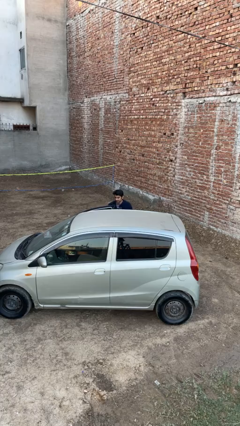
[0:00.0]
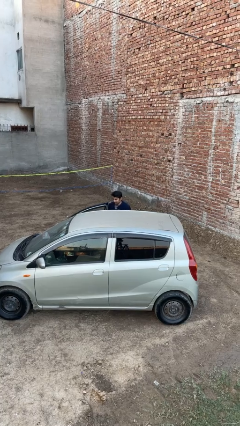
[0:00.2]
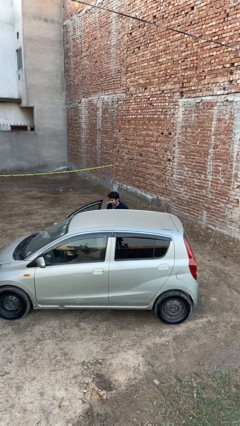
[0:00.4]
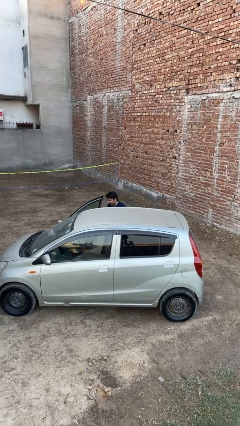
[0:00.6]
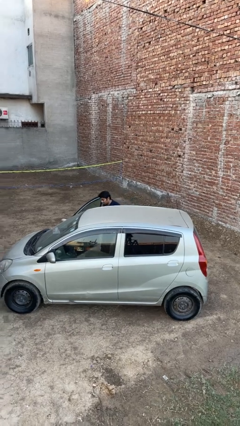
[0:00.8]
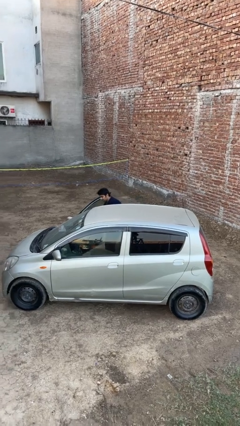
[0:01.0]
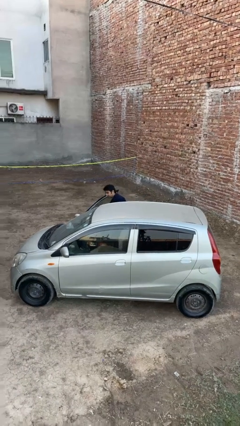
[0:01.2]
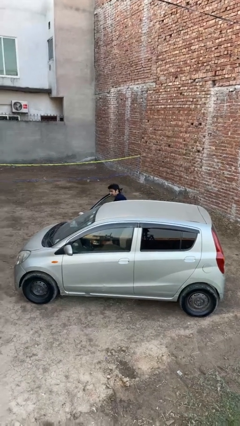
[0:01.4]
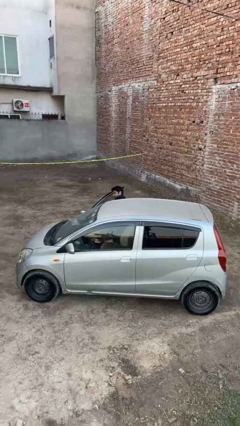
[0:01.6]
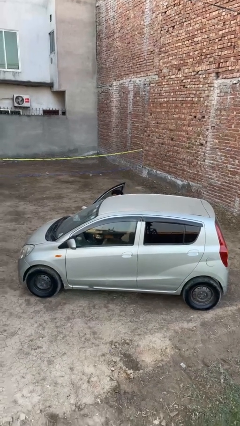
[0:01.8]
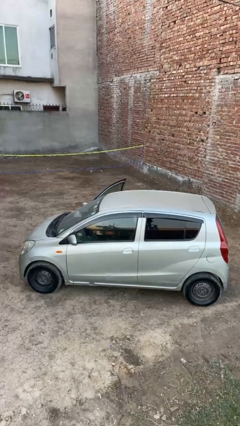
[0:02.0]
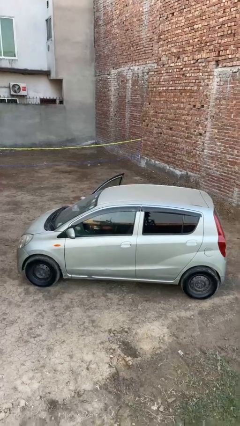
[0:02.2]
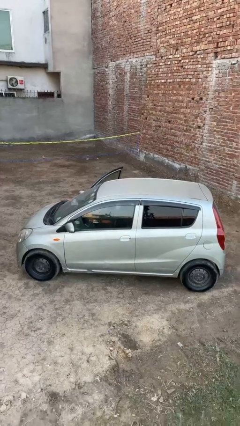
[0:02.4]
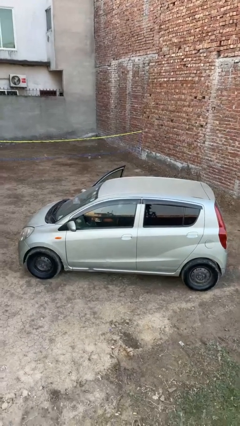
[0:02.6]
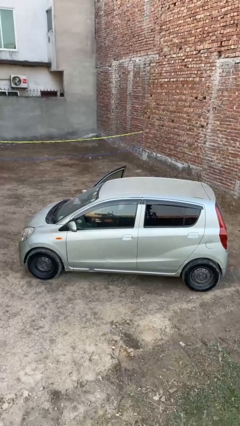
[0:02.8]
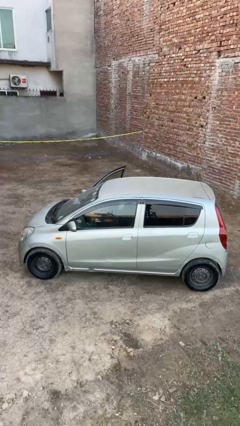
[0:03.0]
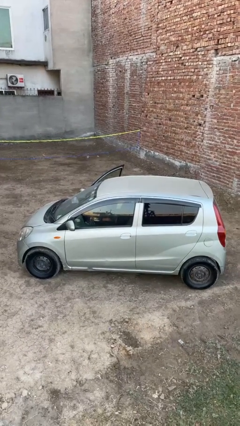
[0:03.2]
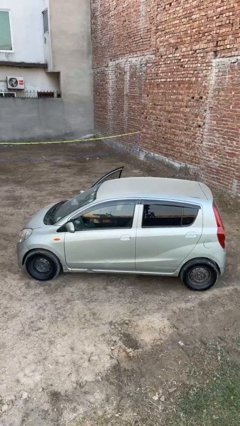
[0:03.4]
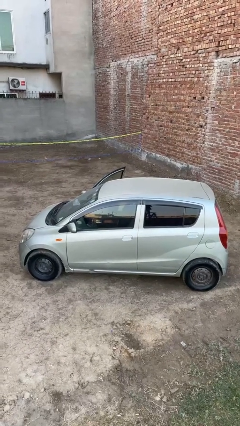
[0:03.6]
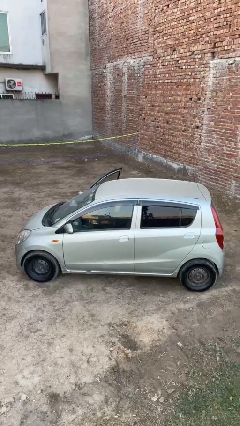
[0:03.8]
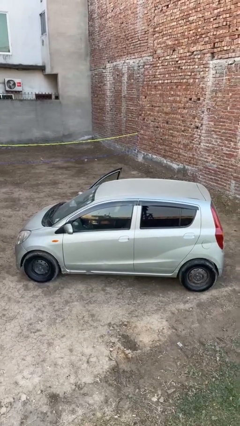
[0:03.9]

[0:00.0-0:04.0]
person enters car

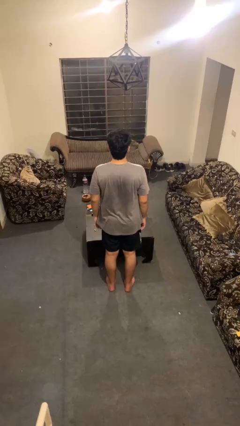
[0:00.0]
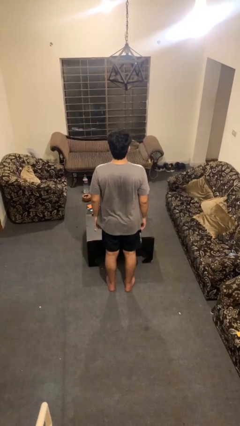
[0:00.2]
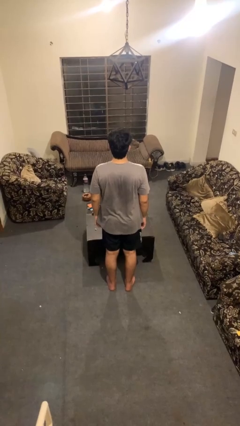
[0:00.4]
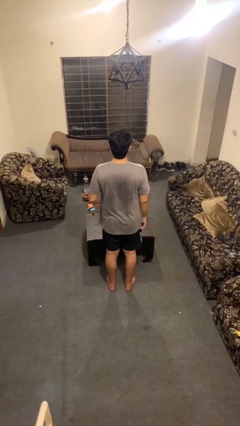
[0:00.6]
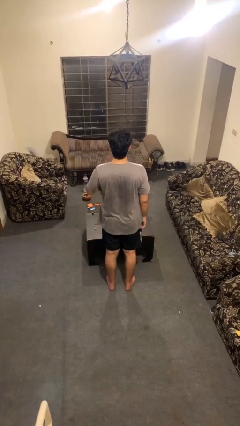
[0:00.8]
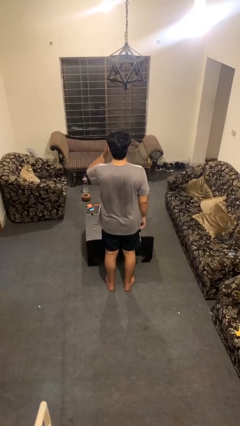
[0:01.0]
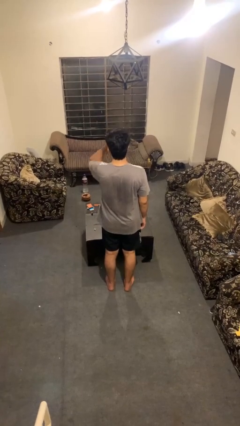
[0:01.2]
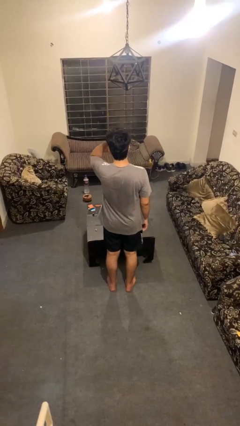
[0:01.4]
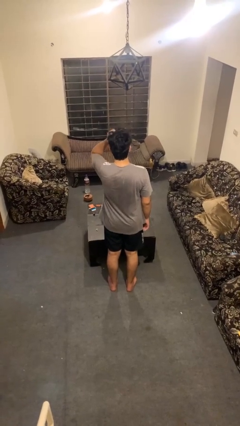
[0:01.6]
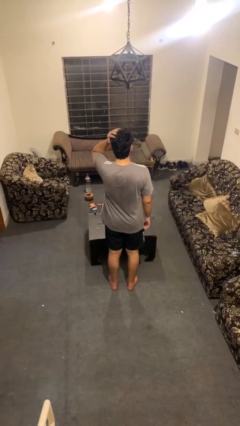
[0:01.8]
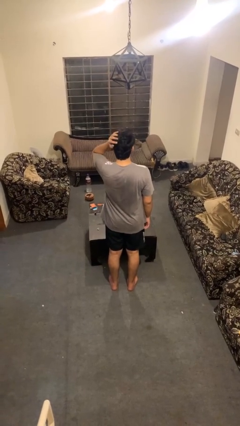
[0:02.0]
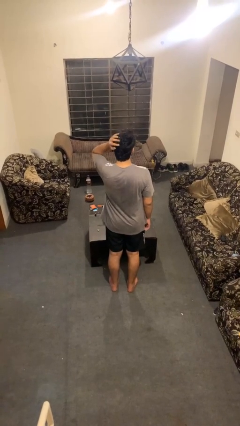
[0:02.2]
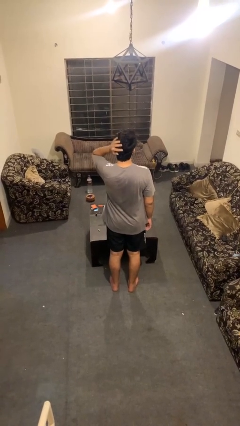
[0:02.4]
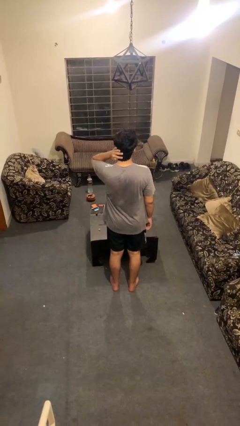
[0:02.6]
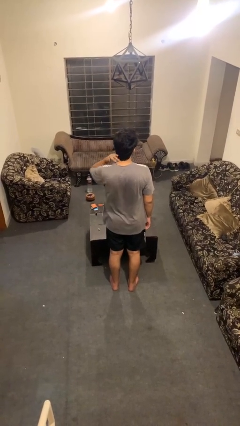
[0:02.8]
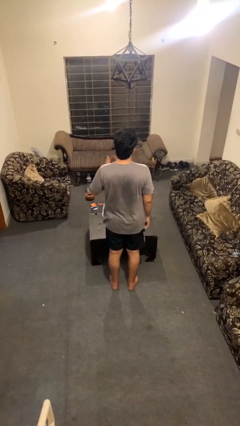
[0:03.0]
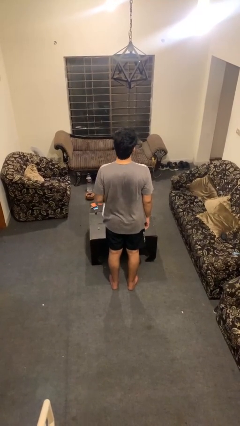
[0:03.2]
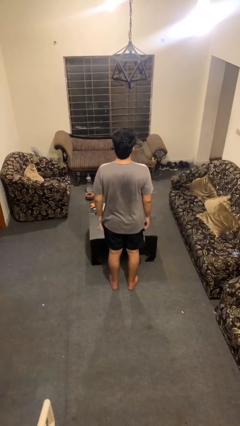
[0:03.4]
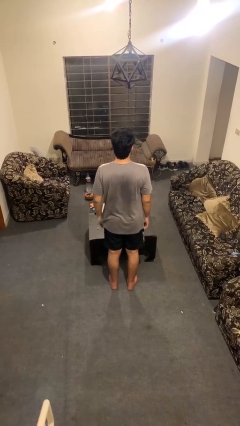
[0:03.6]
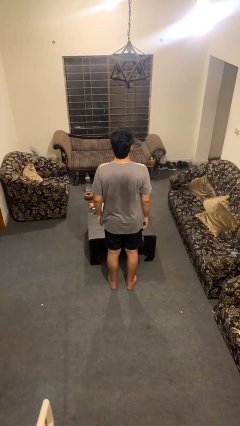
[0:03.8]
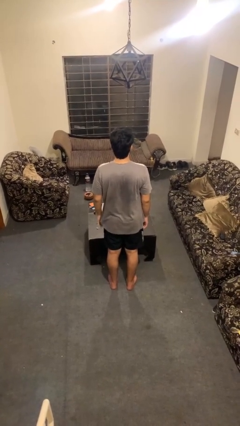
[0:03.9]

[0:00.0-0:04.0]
person strokes hair

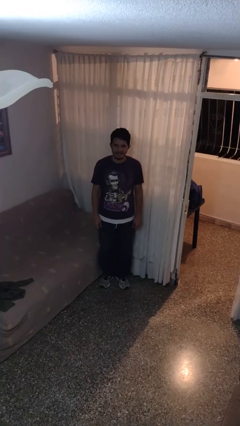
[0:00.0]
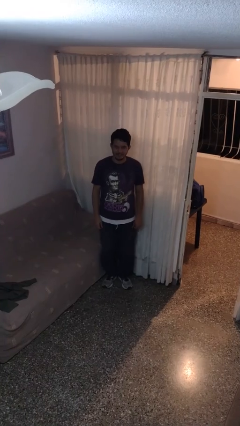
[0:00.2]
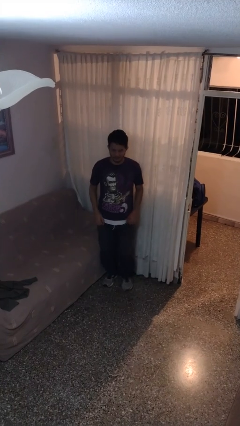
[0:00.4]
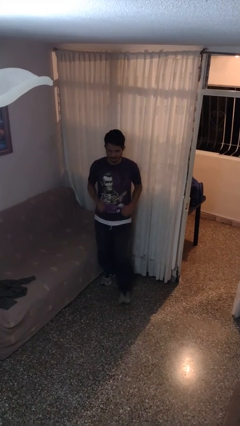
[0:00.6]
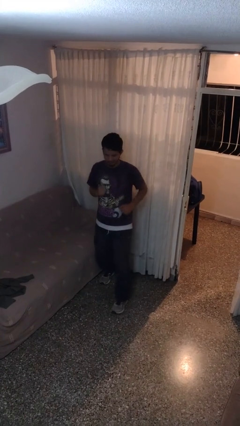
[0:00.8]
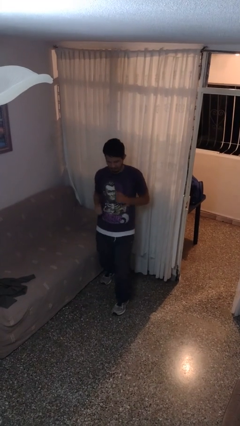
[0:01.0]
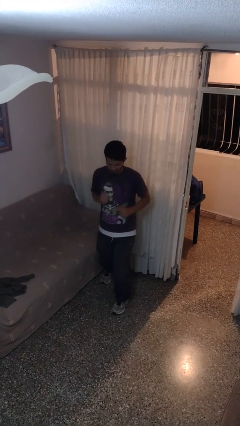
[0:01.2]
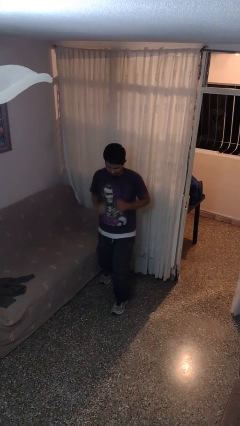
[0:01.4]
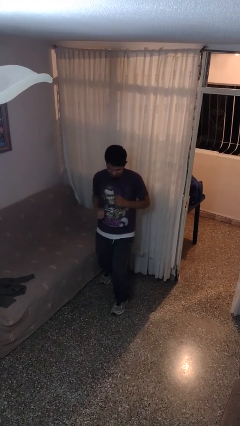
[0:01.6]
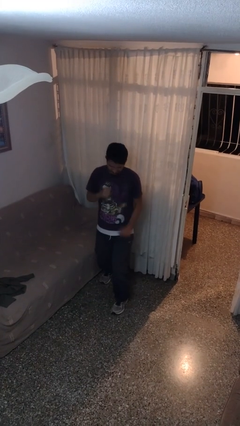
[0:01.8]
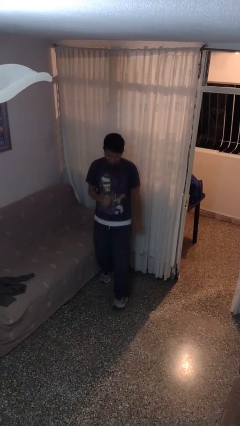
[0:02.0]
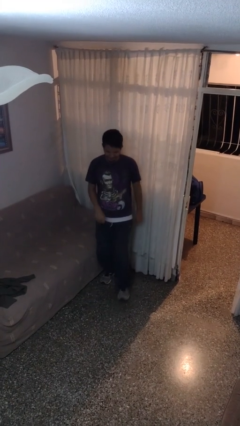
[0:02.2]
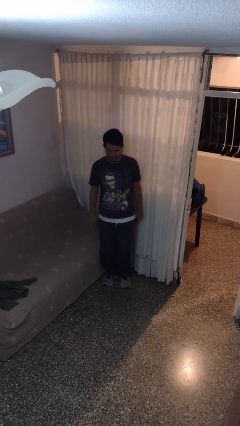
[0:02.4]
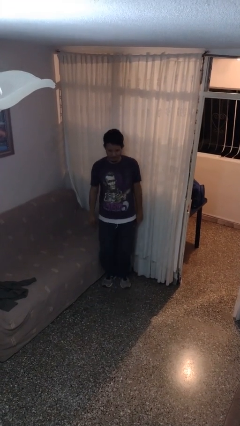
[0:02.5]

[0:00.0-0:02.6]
person dances in place

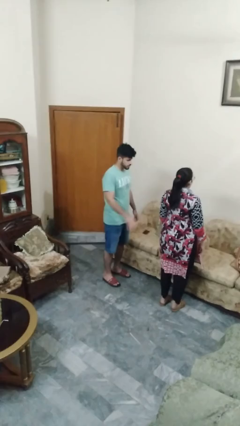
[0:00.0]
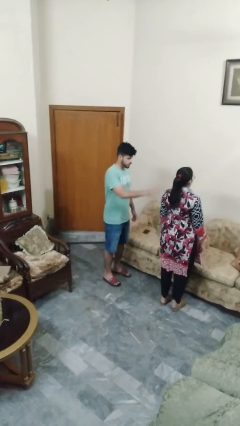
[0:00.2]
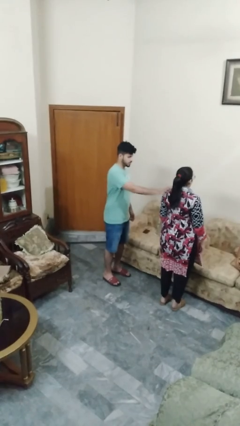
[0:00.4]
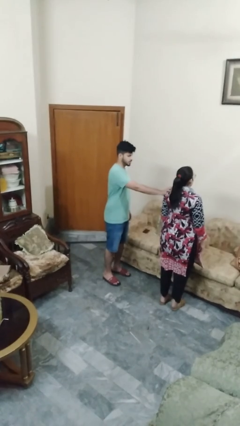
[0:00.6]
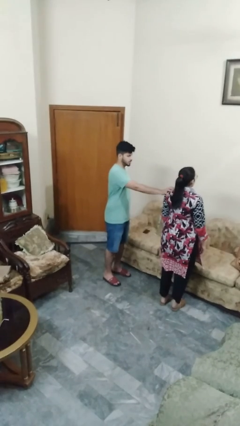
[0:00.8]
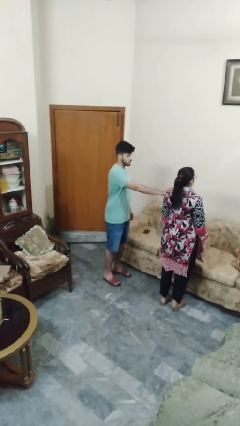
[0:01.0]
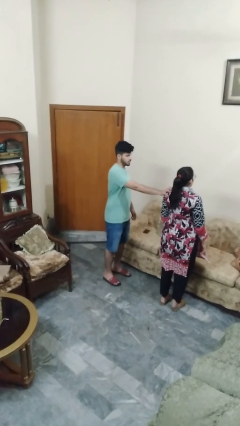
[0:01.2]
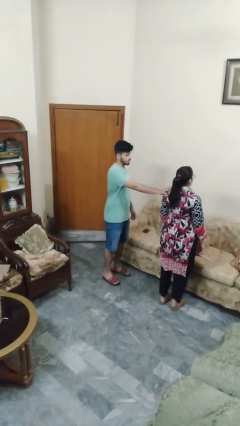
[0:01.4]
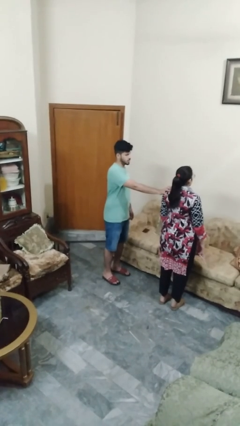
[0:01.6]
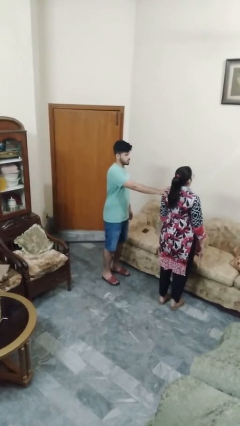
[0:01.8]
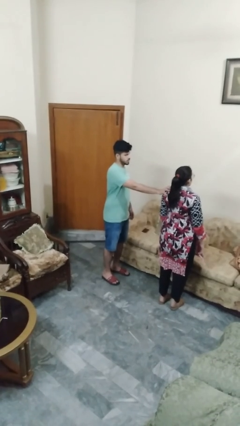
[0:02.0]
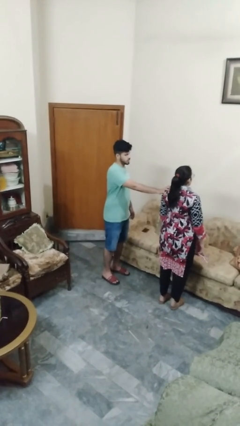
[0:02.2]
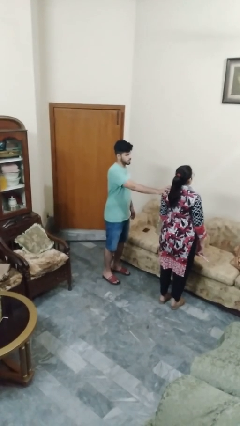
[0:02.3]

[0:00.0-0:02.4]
person grabs person by shoulder

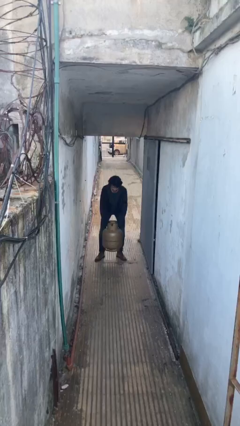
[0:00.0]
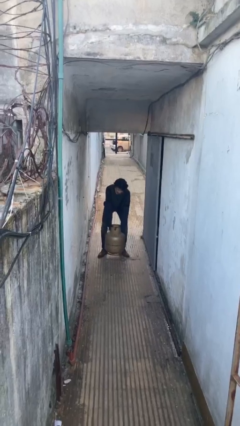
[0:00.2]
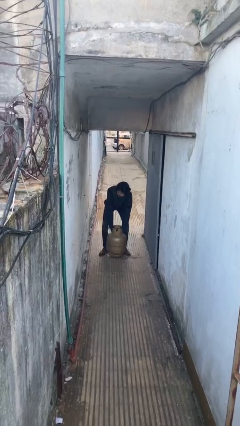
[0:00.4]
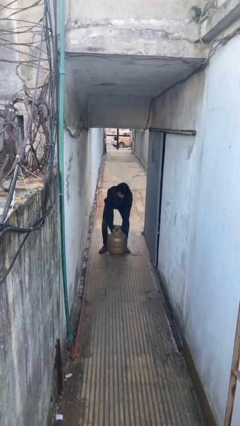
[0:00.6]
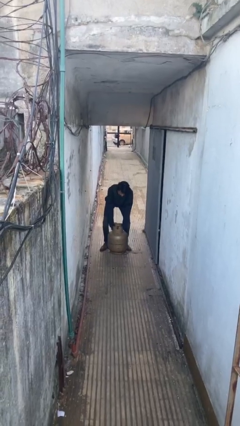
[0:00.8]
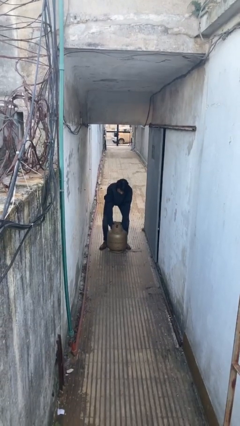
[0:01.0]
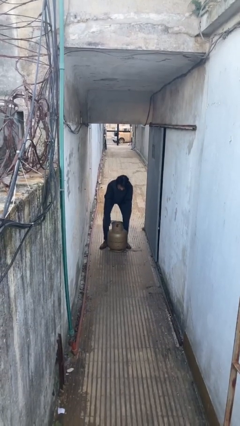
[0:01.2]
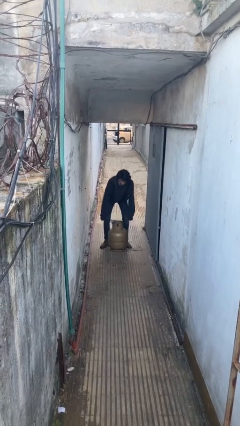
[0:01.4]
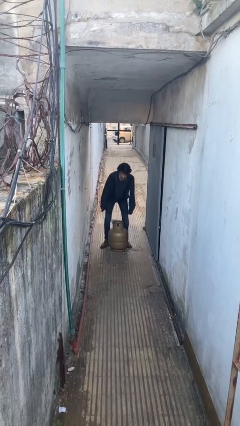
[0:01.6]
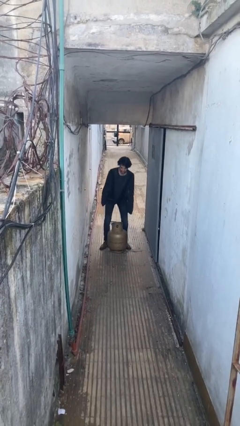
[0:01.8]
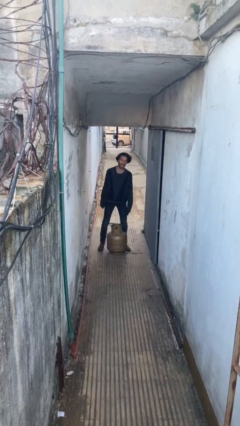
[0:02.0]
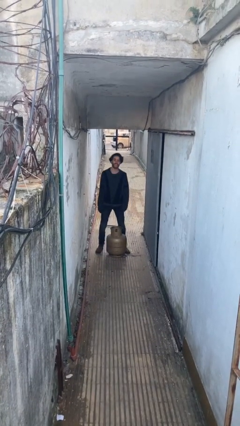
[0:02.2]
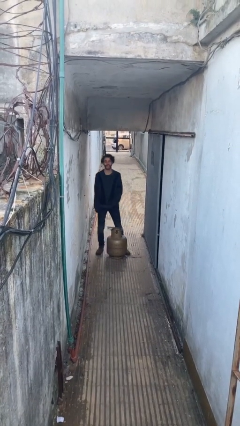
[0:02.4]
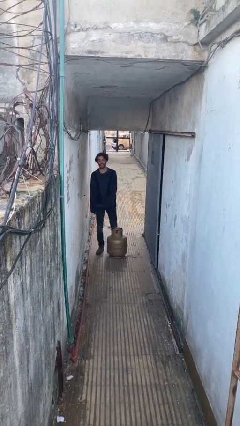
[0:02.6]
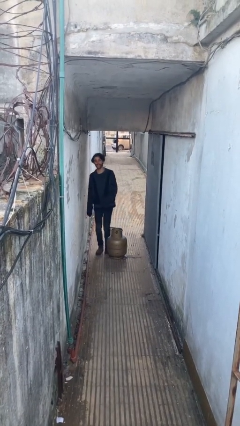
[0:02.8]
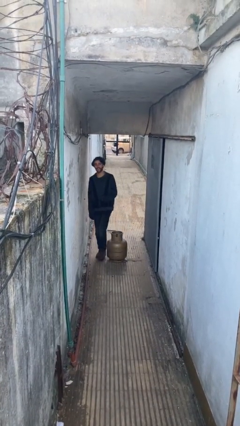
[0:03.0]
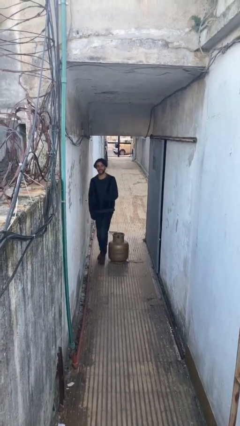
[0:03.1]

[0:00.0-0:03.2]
person puts down object on floor

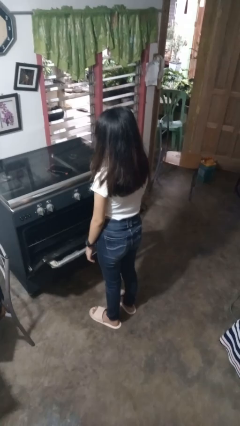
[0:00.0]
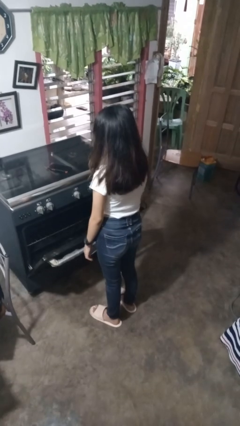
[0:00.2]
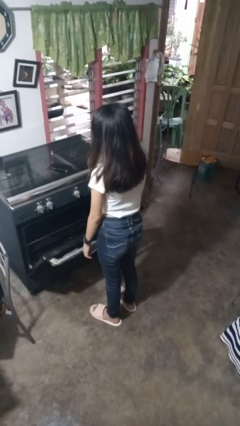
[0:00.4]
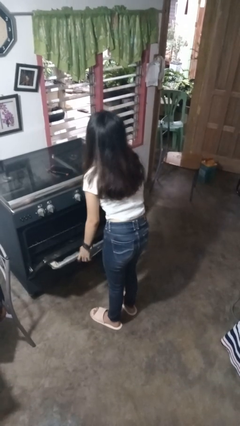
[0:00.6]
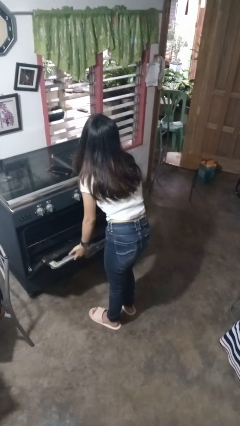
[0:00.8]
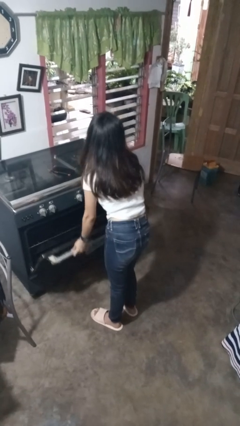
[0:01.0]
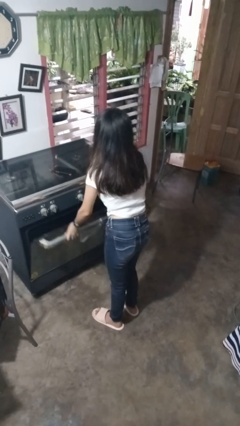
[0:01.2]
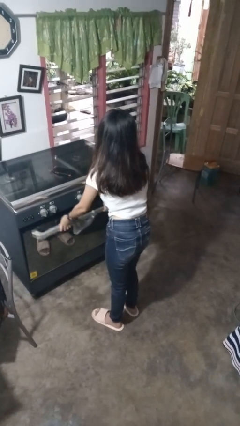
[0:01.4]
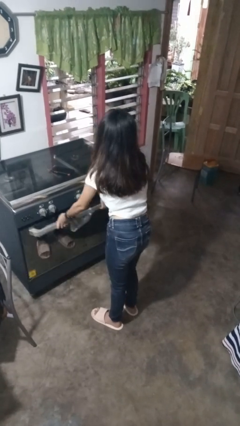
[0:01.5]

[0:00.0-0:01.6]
person closes oven door
